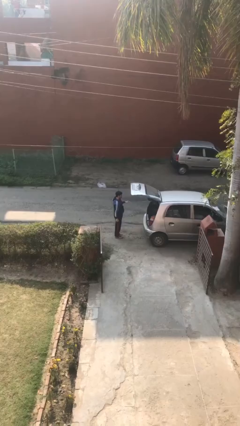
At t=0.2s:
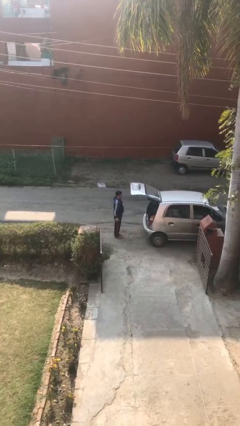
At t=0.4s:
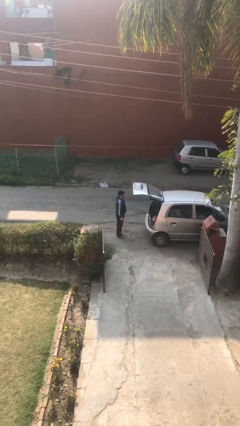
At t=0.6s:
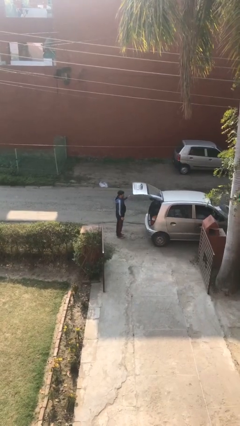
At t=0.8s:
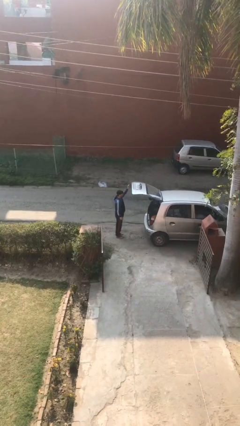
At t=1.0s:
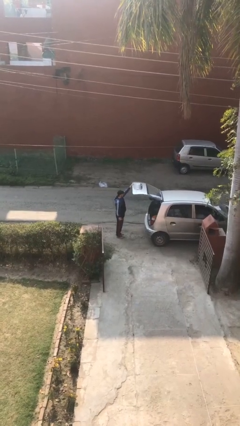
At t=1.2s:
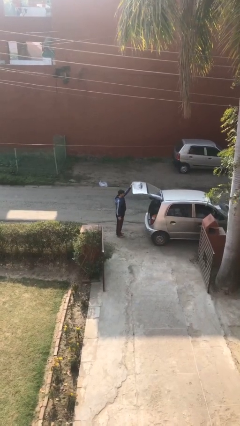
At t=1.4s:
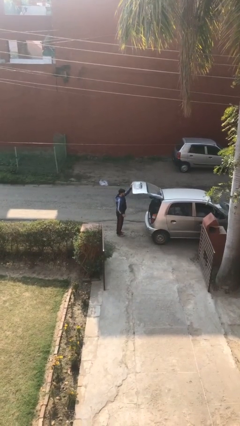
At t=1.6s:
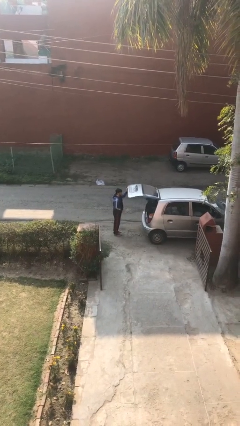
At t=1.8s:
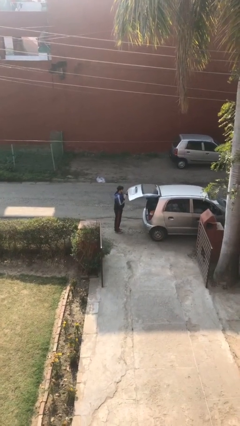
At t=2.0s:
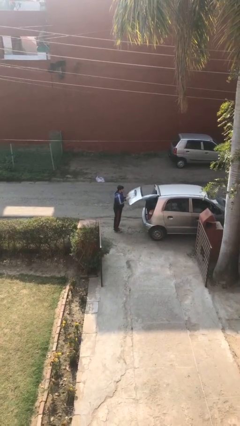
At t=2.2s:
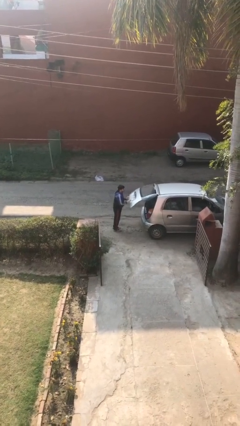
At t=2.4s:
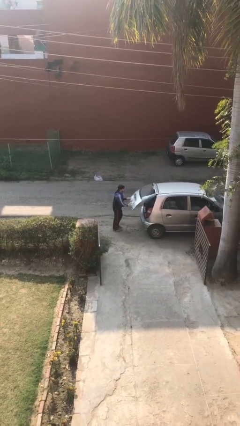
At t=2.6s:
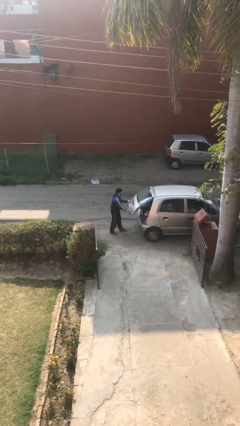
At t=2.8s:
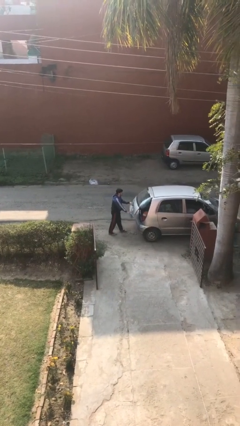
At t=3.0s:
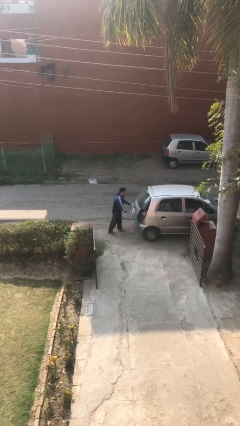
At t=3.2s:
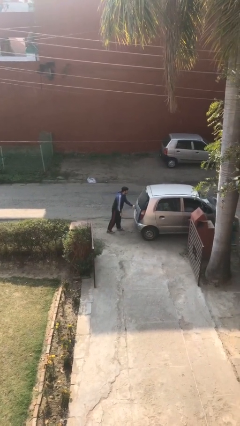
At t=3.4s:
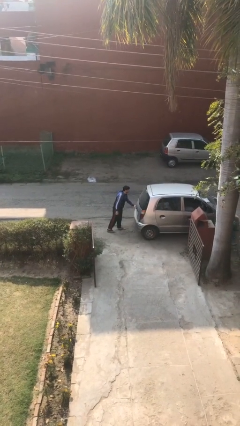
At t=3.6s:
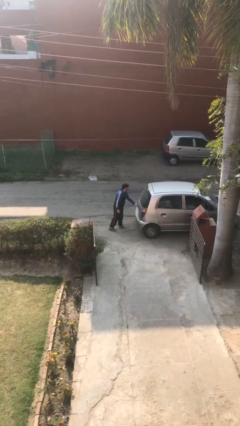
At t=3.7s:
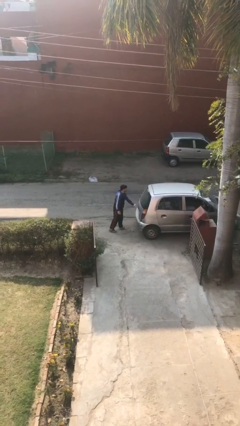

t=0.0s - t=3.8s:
person closes car trunk

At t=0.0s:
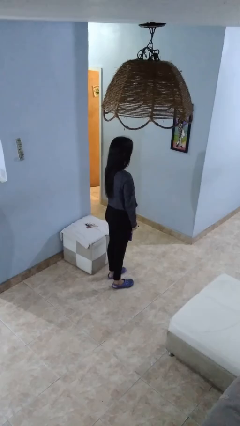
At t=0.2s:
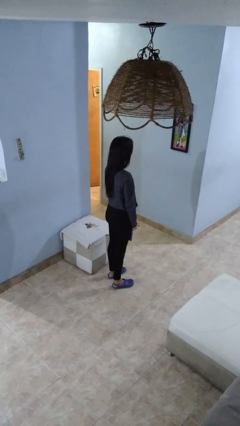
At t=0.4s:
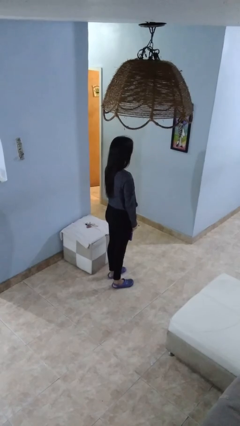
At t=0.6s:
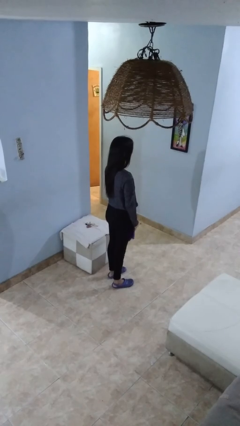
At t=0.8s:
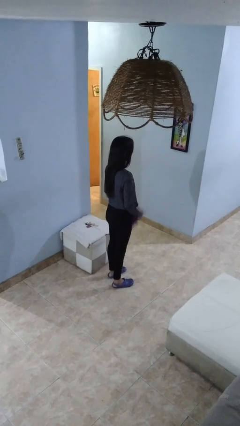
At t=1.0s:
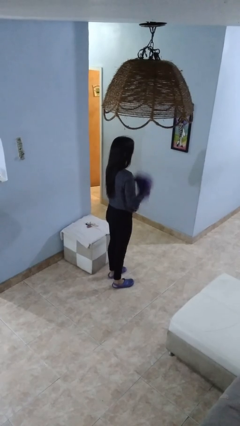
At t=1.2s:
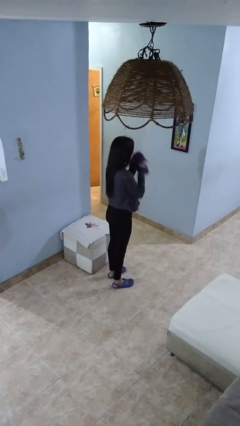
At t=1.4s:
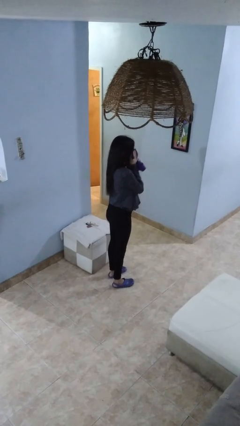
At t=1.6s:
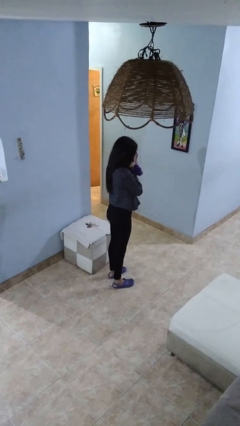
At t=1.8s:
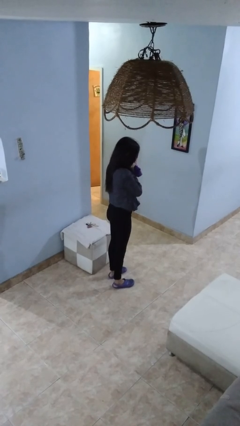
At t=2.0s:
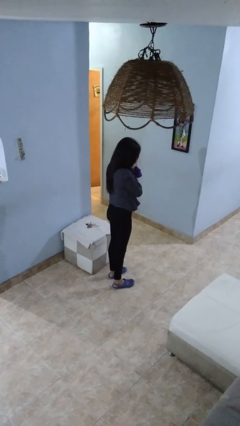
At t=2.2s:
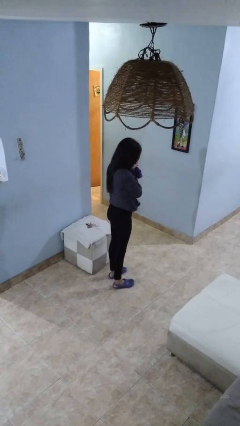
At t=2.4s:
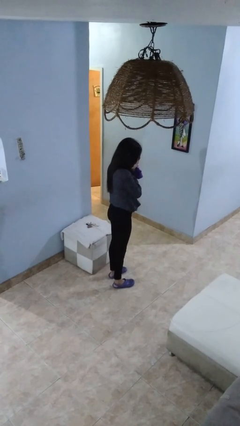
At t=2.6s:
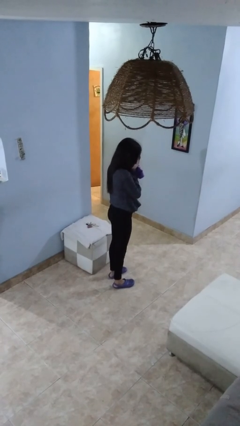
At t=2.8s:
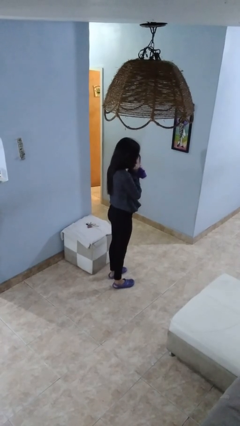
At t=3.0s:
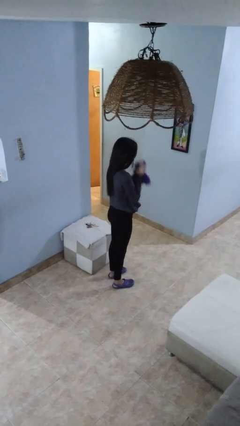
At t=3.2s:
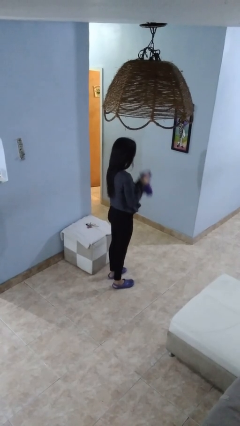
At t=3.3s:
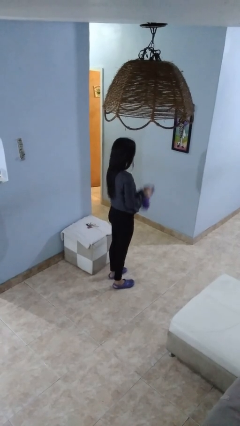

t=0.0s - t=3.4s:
person blows nose

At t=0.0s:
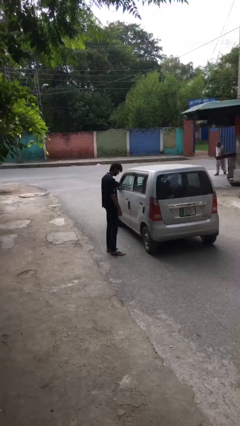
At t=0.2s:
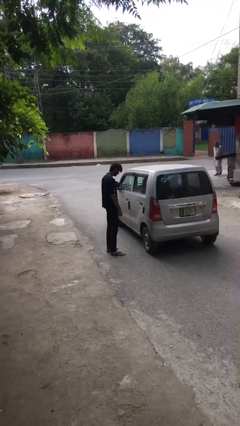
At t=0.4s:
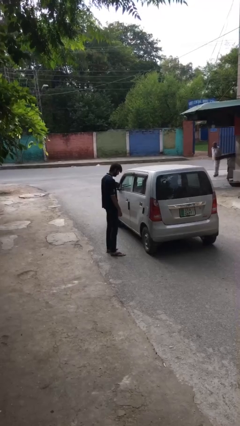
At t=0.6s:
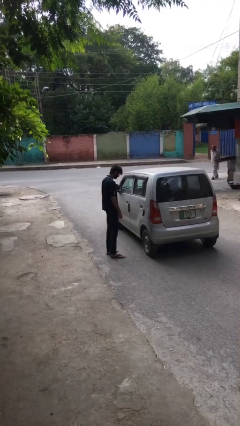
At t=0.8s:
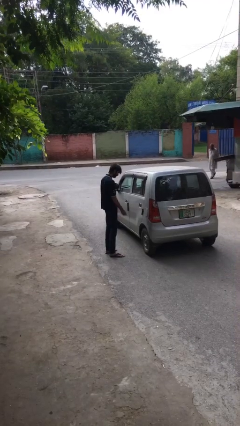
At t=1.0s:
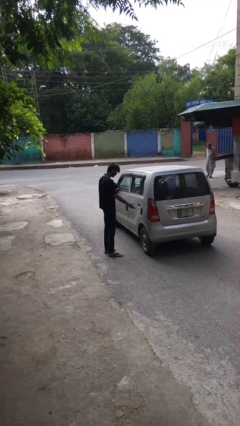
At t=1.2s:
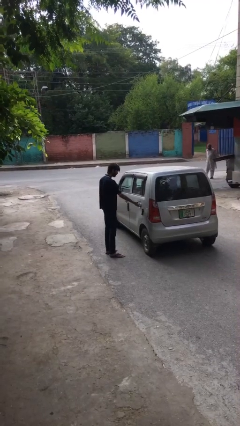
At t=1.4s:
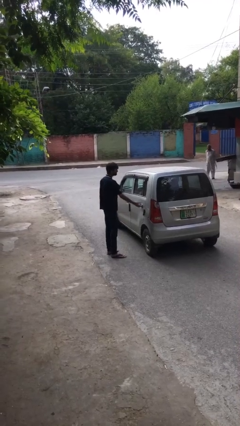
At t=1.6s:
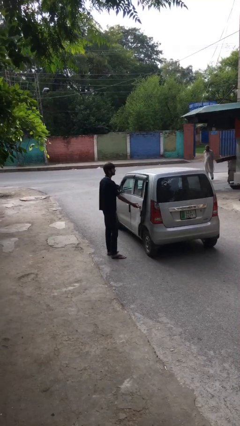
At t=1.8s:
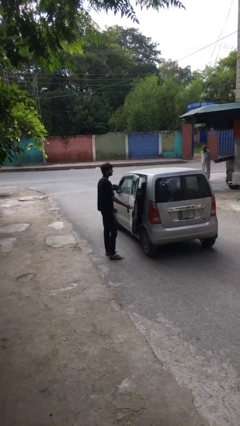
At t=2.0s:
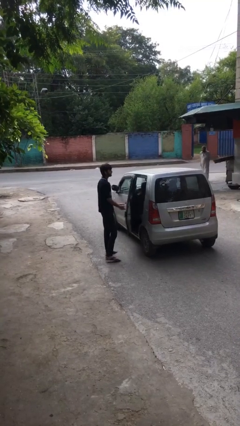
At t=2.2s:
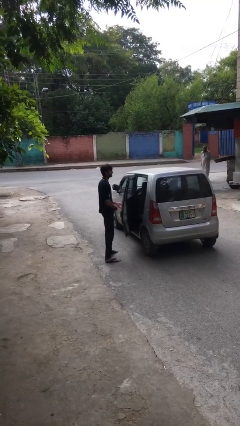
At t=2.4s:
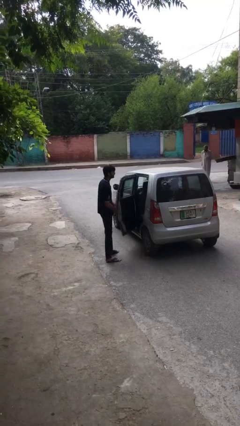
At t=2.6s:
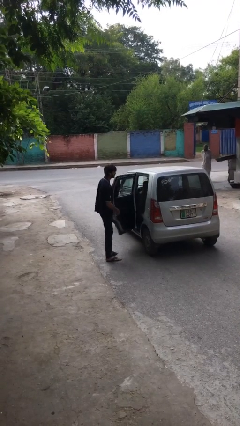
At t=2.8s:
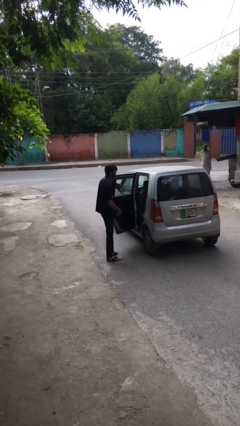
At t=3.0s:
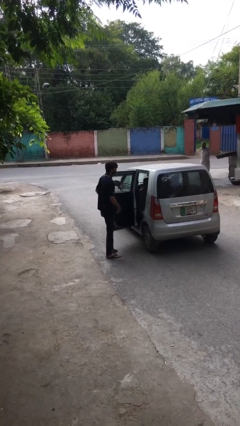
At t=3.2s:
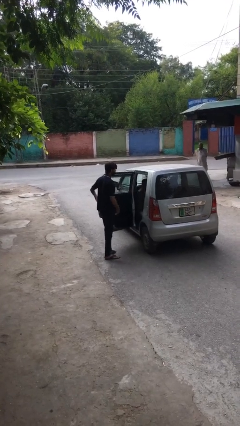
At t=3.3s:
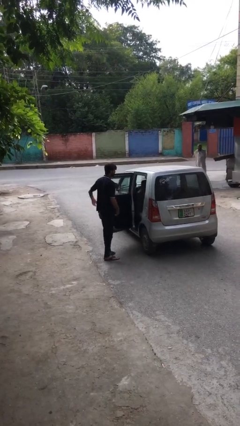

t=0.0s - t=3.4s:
person opens car door
